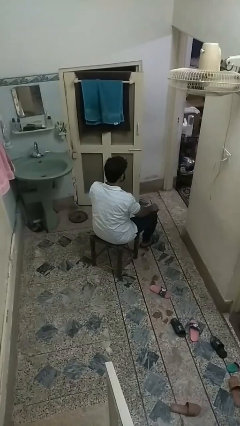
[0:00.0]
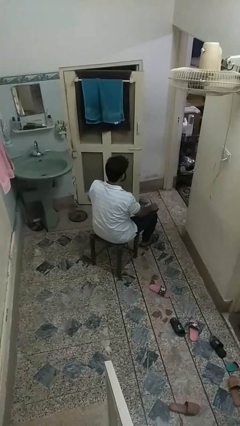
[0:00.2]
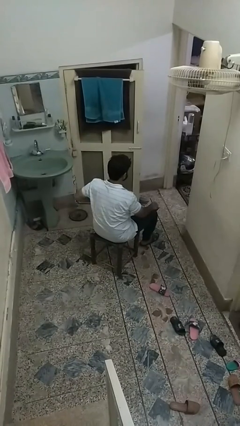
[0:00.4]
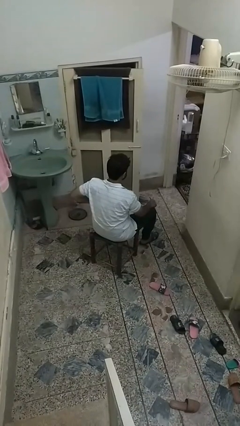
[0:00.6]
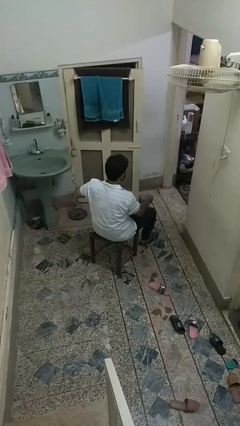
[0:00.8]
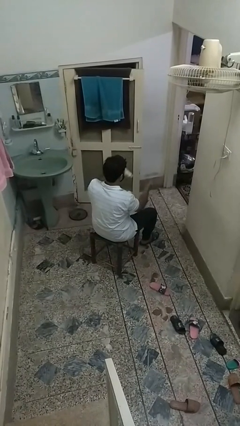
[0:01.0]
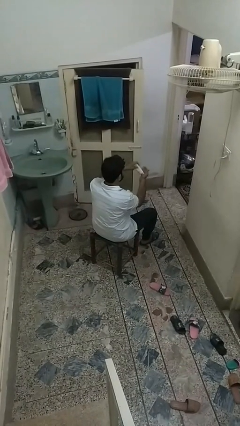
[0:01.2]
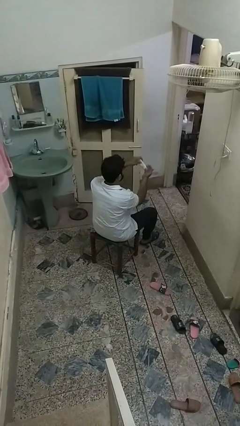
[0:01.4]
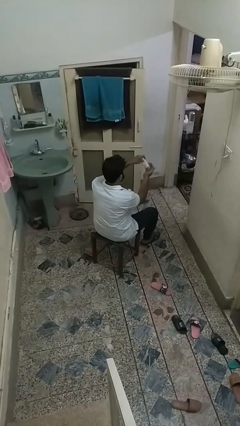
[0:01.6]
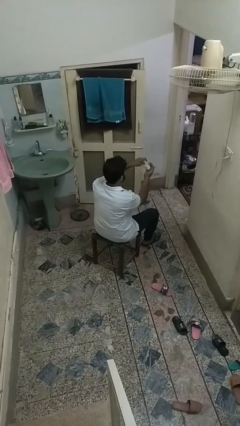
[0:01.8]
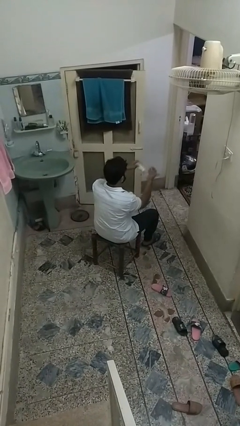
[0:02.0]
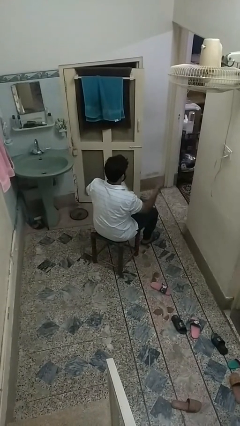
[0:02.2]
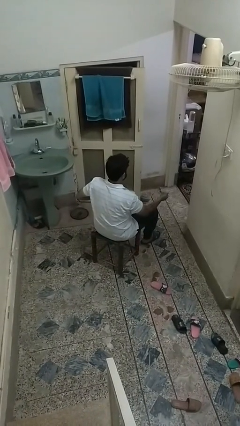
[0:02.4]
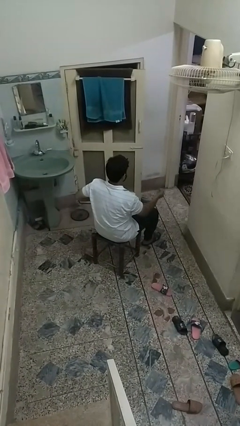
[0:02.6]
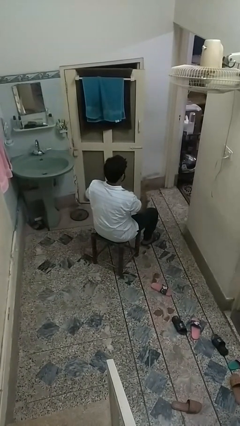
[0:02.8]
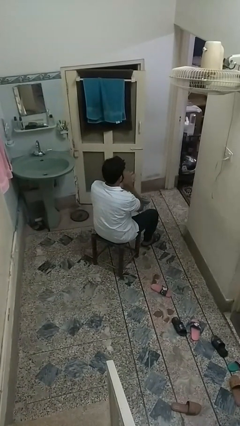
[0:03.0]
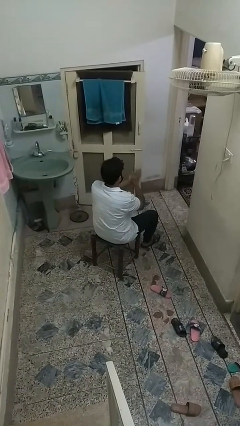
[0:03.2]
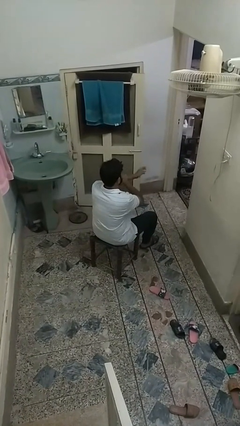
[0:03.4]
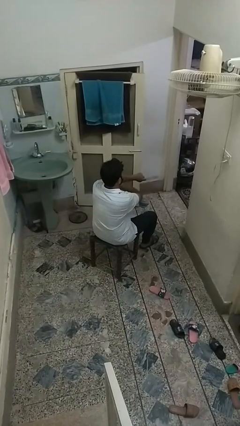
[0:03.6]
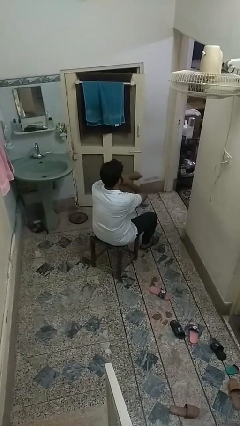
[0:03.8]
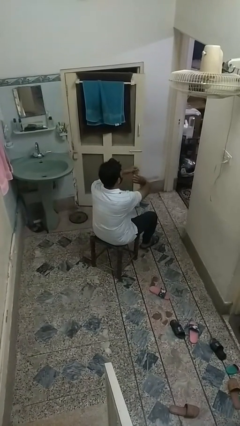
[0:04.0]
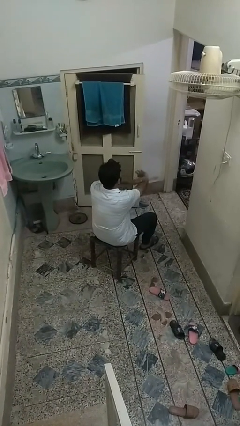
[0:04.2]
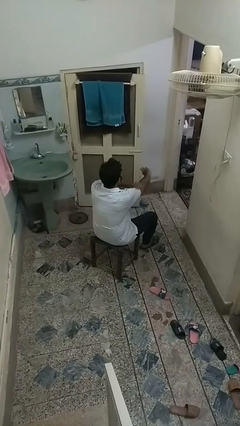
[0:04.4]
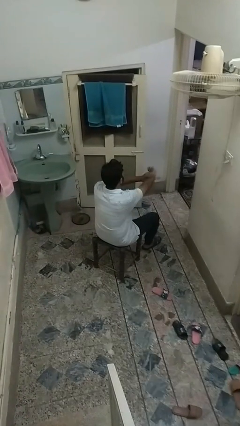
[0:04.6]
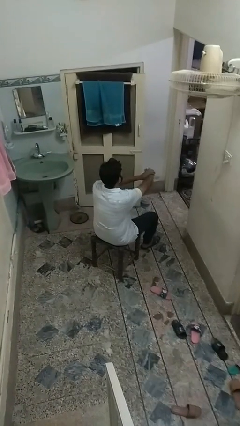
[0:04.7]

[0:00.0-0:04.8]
person applies sunscreen

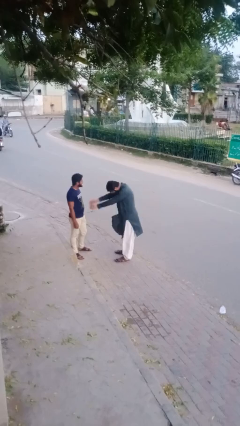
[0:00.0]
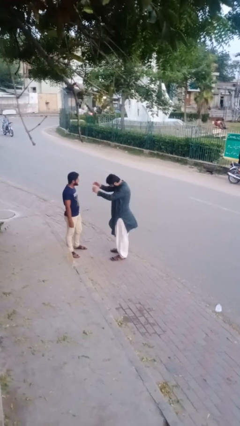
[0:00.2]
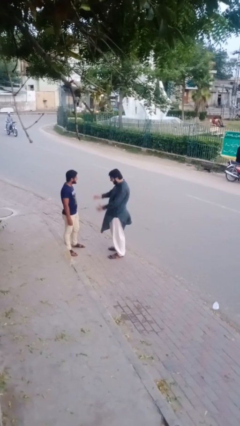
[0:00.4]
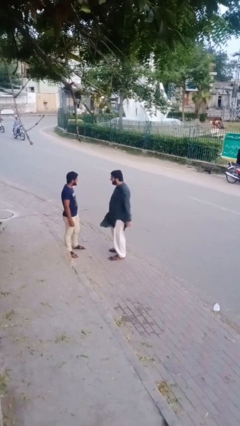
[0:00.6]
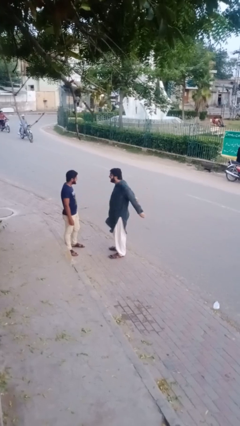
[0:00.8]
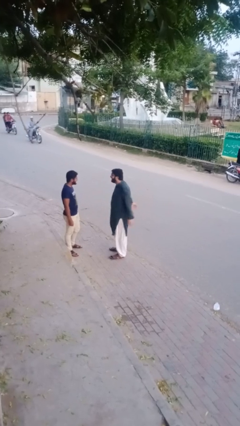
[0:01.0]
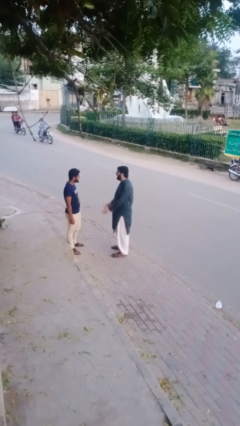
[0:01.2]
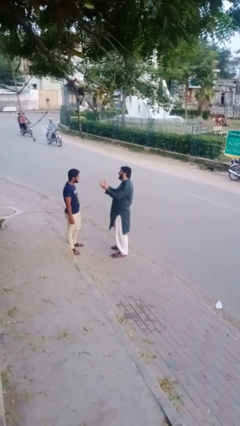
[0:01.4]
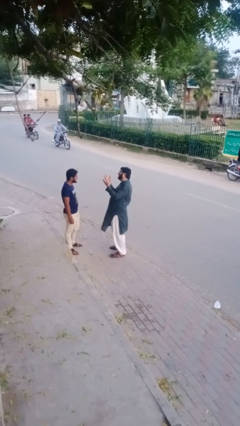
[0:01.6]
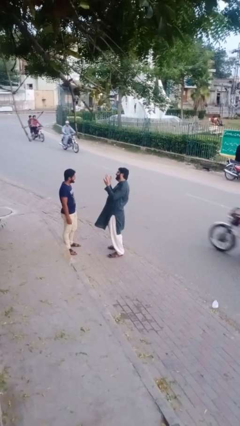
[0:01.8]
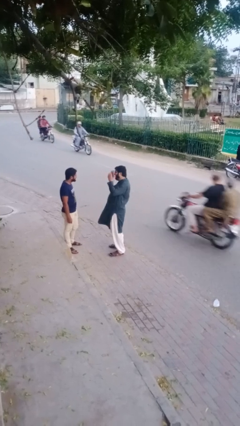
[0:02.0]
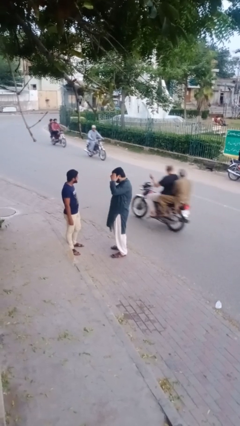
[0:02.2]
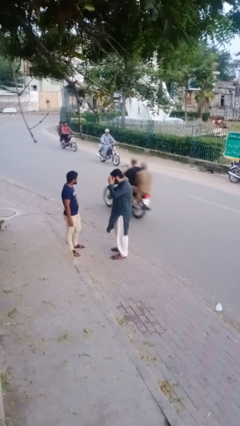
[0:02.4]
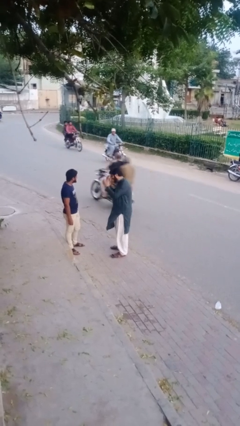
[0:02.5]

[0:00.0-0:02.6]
person laughs with person

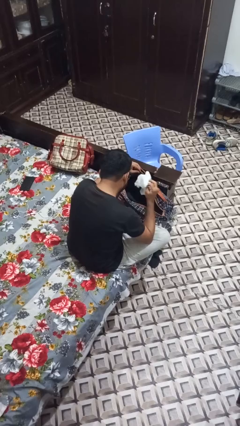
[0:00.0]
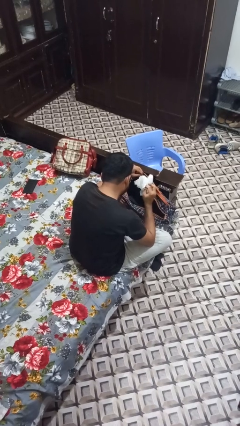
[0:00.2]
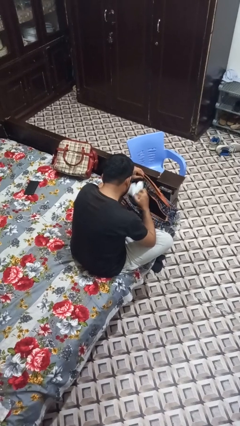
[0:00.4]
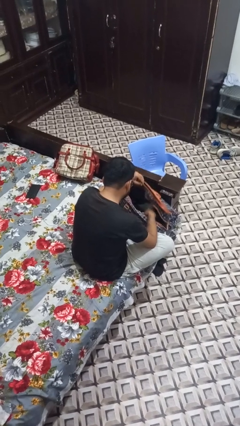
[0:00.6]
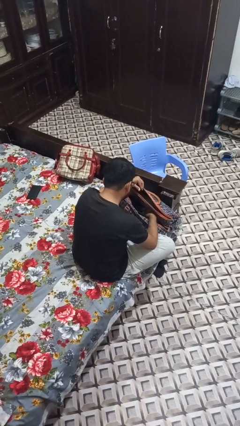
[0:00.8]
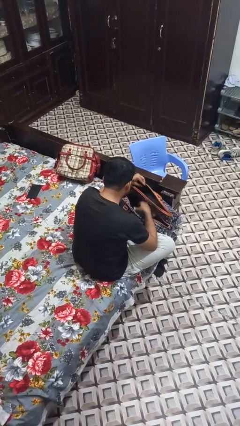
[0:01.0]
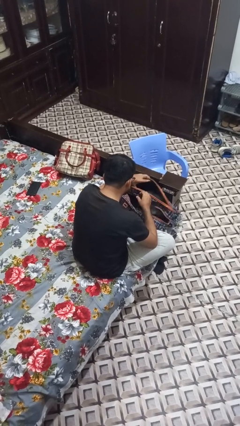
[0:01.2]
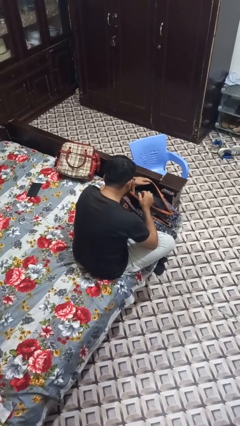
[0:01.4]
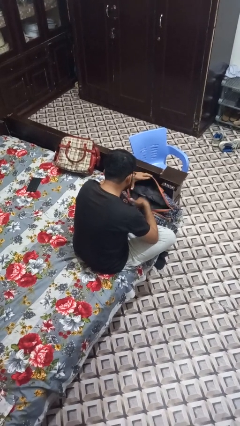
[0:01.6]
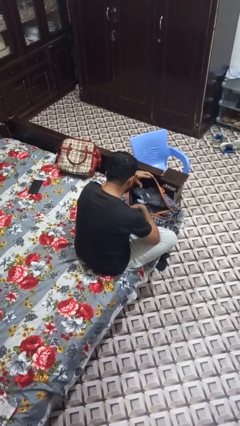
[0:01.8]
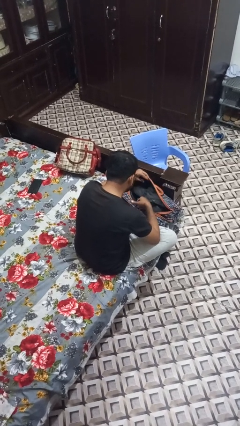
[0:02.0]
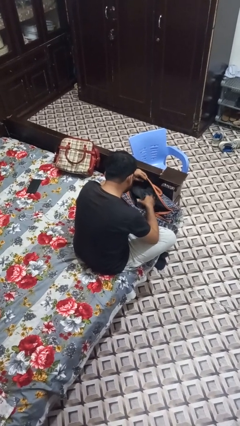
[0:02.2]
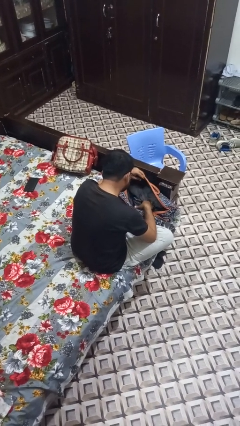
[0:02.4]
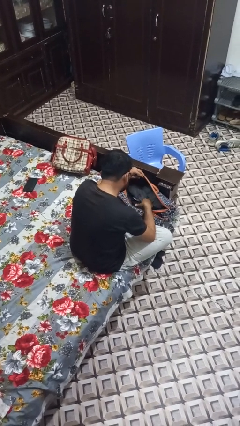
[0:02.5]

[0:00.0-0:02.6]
person puts object into backpack

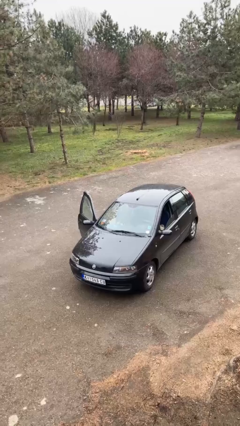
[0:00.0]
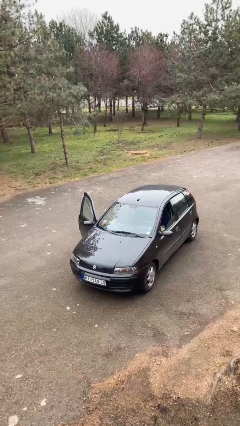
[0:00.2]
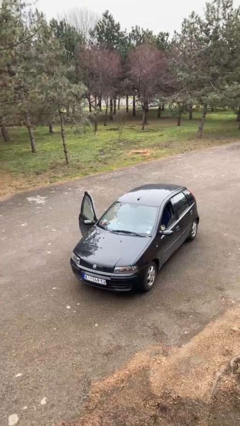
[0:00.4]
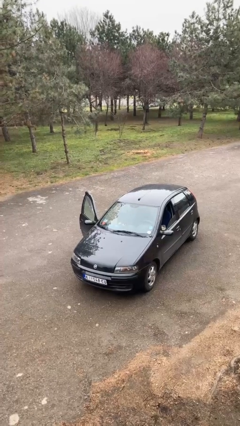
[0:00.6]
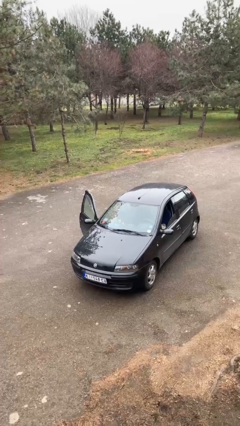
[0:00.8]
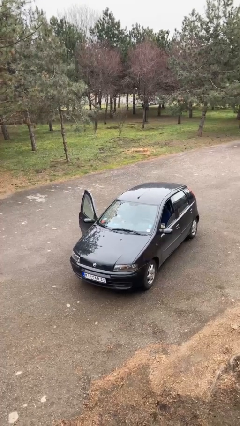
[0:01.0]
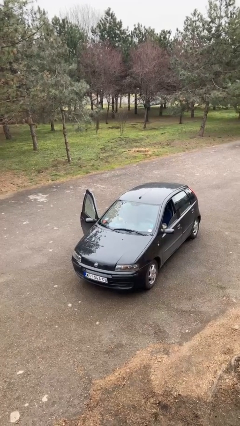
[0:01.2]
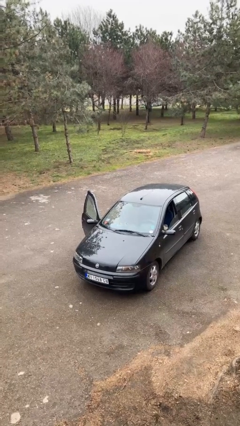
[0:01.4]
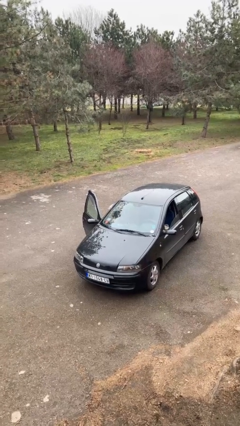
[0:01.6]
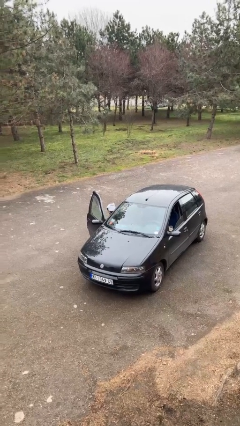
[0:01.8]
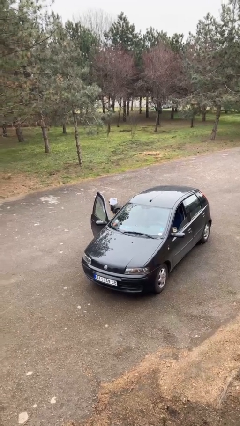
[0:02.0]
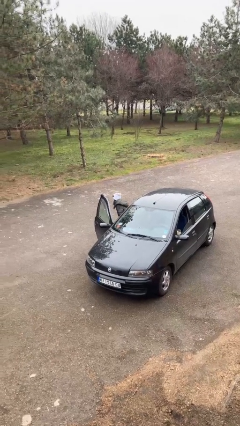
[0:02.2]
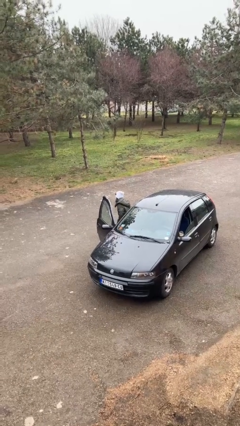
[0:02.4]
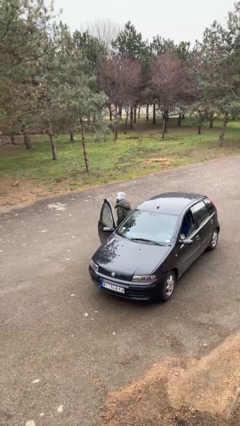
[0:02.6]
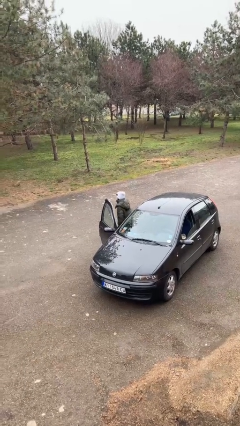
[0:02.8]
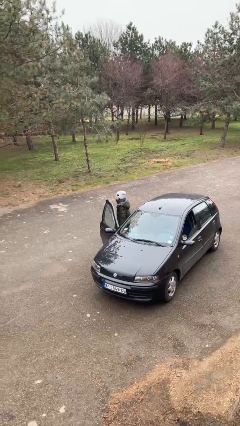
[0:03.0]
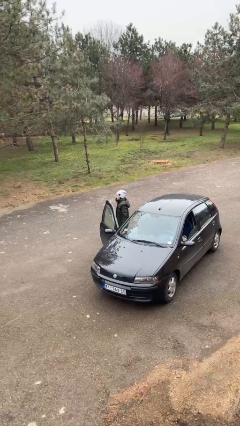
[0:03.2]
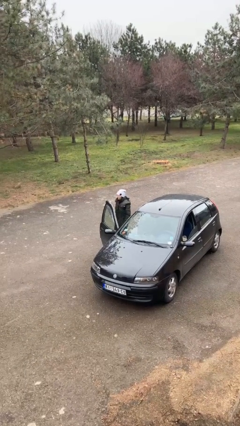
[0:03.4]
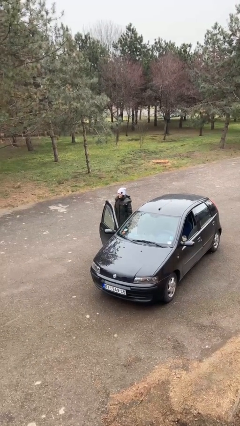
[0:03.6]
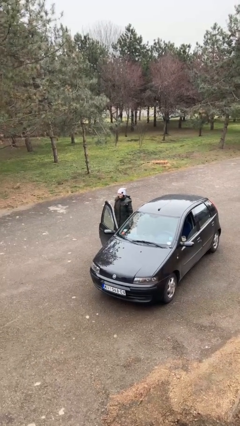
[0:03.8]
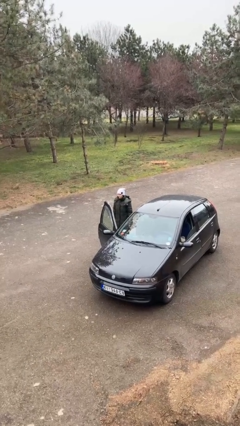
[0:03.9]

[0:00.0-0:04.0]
person exits car

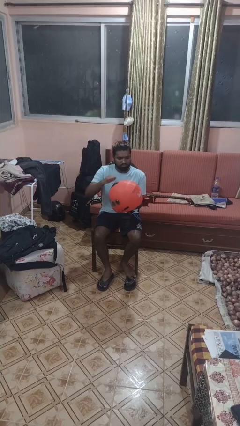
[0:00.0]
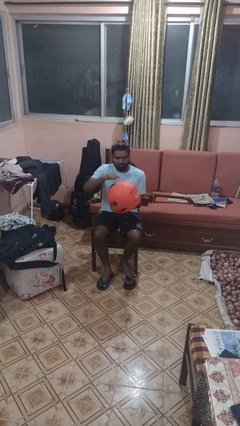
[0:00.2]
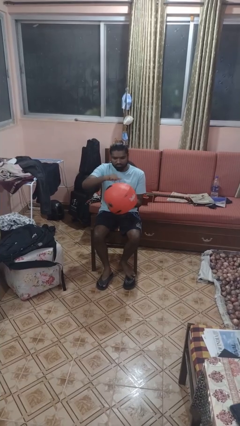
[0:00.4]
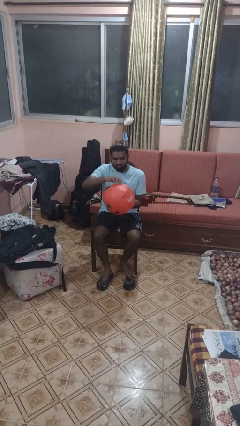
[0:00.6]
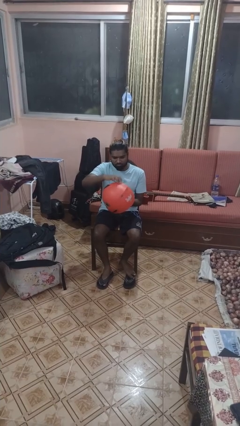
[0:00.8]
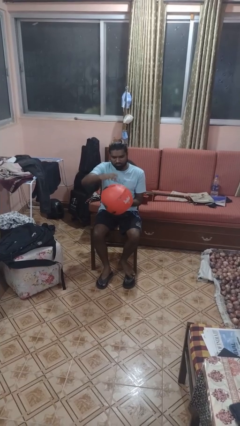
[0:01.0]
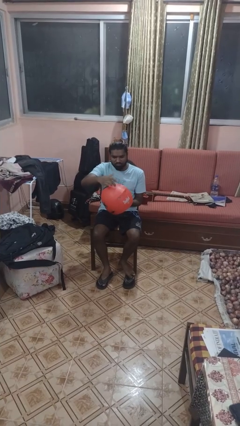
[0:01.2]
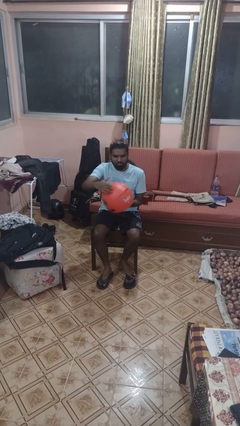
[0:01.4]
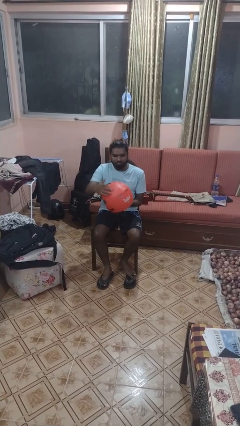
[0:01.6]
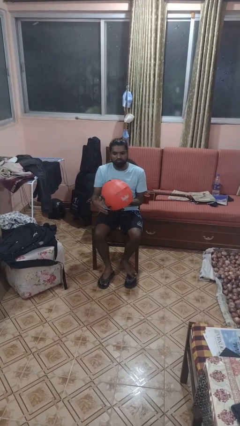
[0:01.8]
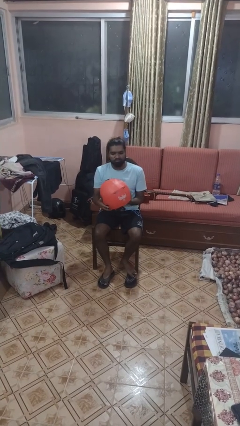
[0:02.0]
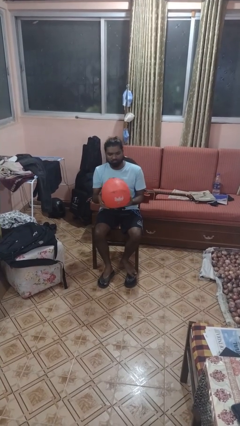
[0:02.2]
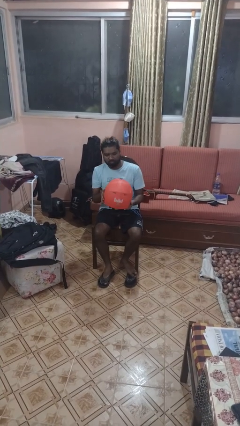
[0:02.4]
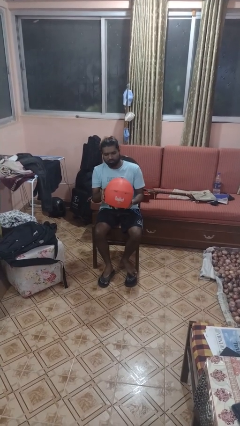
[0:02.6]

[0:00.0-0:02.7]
person taps object with finger

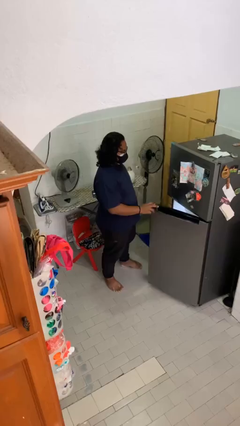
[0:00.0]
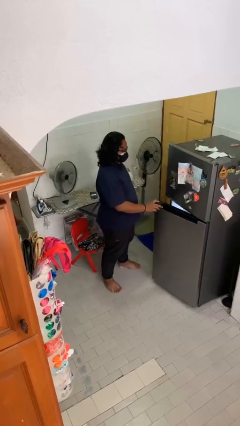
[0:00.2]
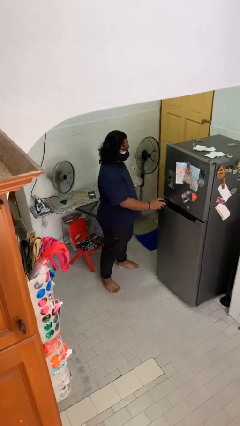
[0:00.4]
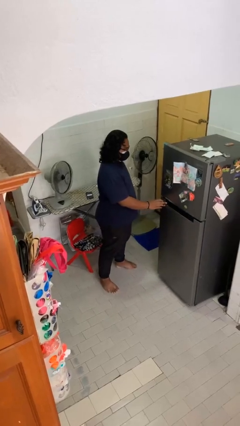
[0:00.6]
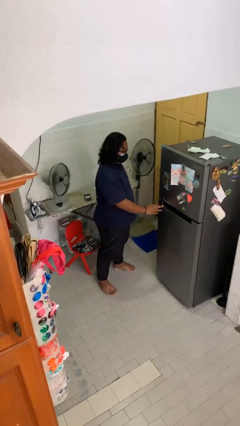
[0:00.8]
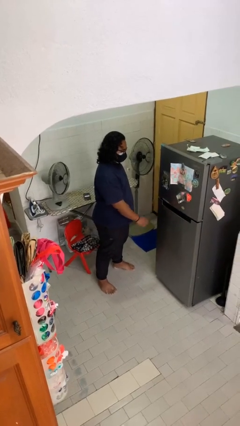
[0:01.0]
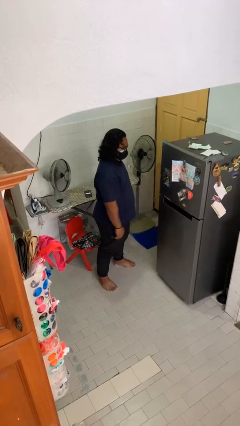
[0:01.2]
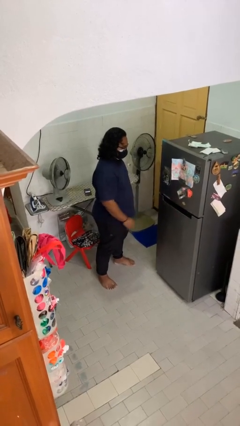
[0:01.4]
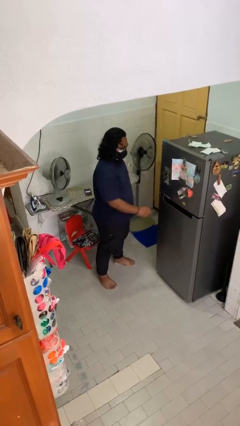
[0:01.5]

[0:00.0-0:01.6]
person closes refrigerator
